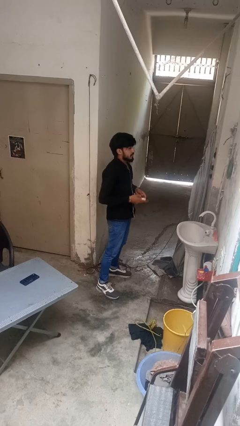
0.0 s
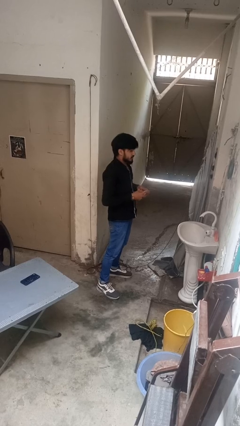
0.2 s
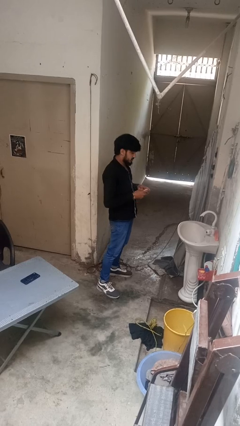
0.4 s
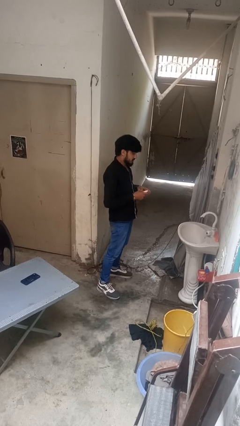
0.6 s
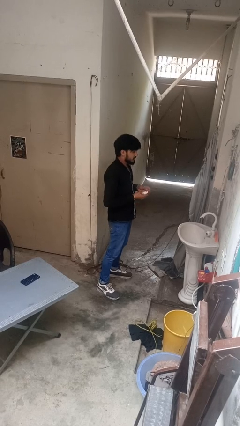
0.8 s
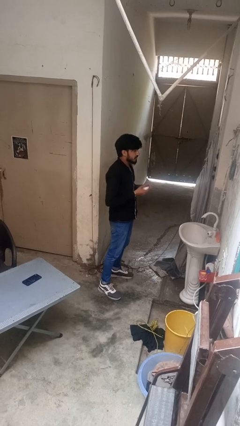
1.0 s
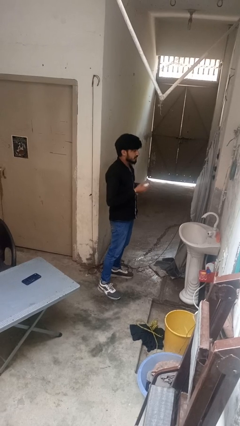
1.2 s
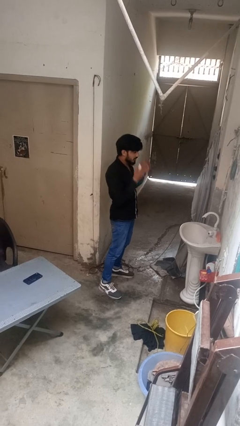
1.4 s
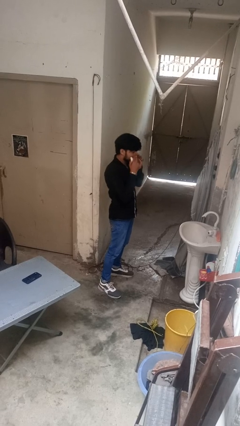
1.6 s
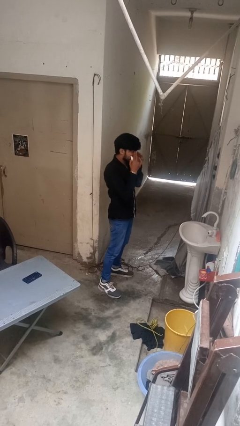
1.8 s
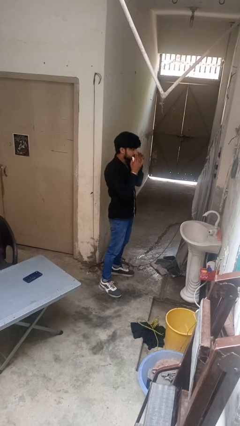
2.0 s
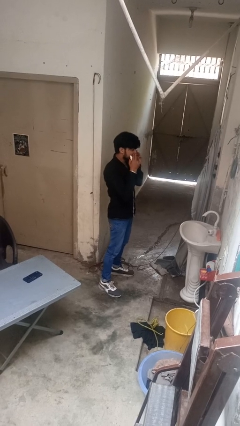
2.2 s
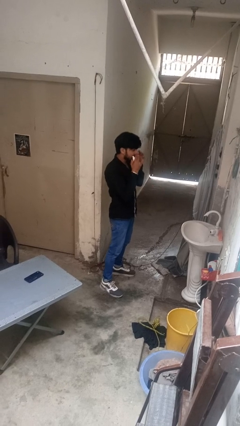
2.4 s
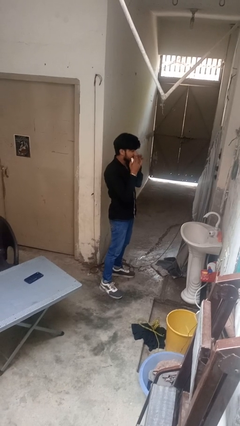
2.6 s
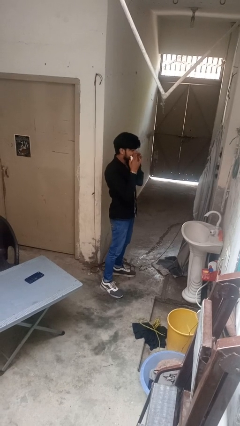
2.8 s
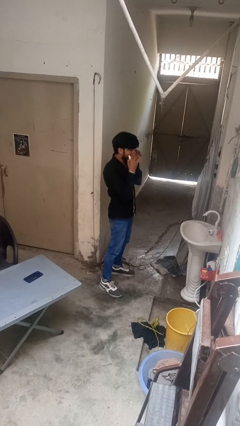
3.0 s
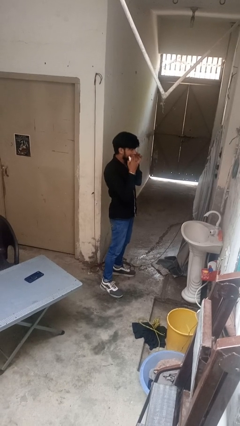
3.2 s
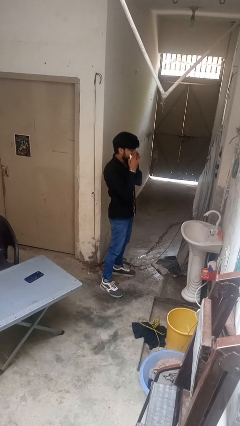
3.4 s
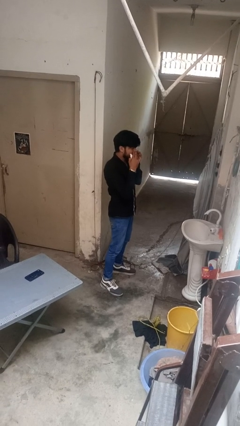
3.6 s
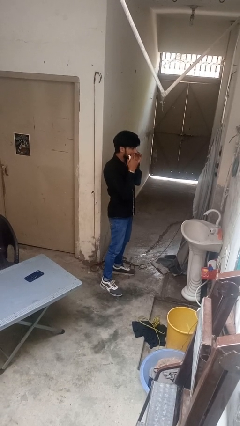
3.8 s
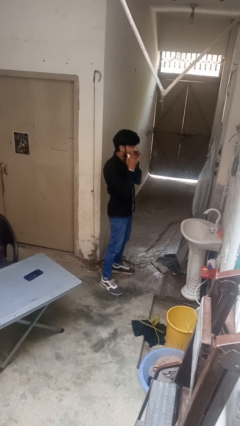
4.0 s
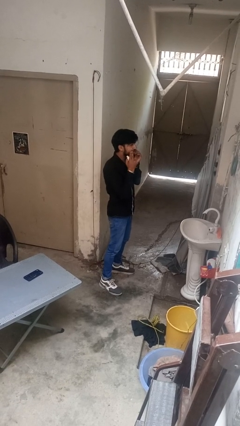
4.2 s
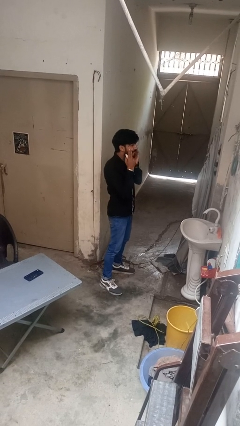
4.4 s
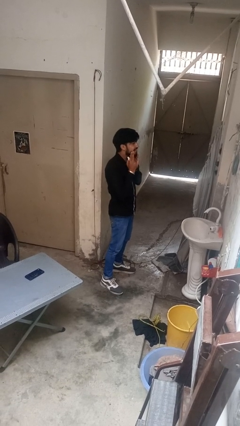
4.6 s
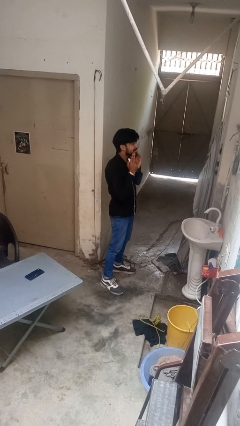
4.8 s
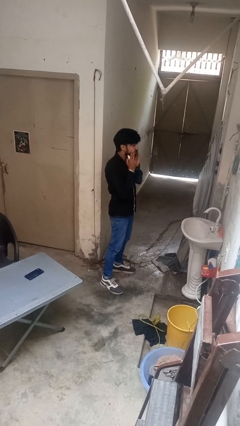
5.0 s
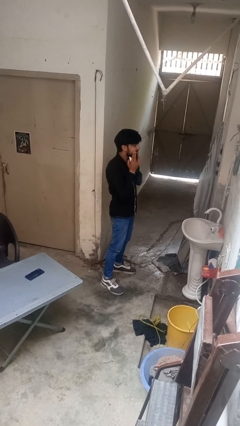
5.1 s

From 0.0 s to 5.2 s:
person applies foundation makeup

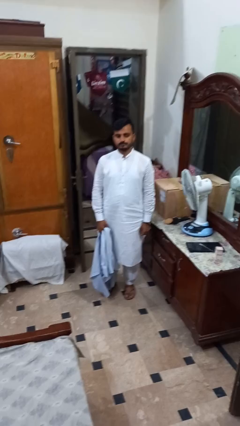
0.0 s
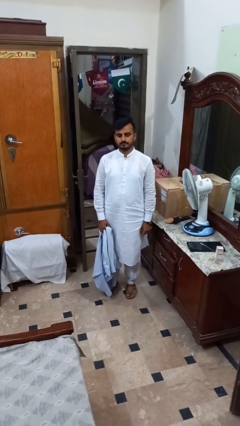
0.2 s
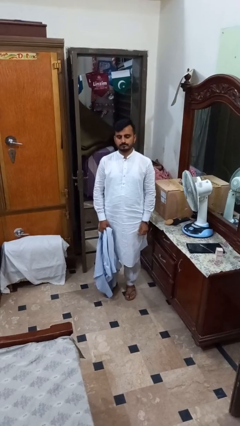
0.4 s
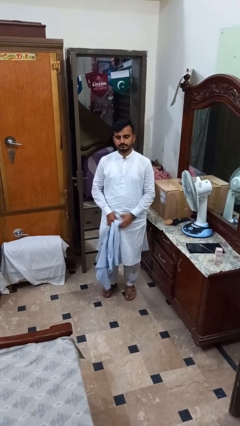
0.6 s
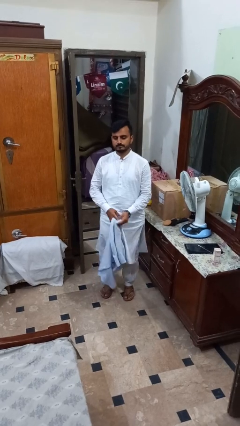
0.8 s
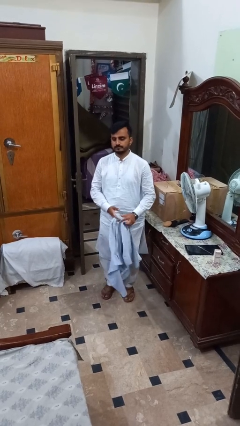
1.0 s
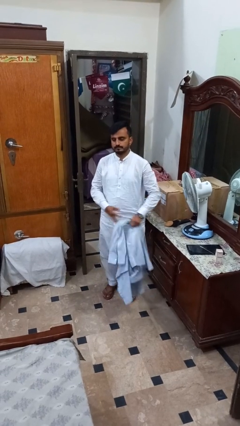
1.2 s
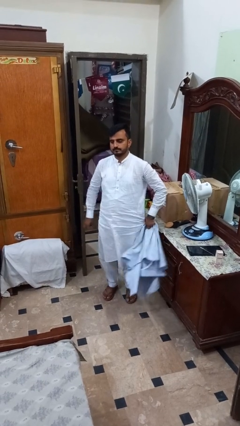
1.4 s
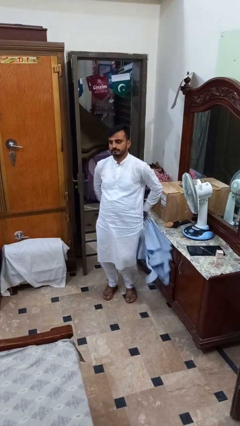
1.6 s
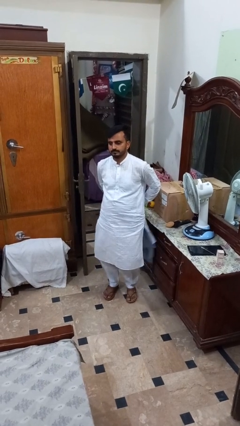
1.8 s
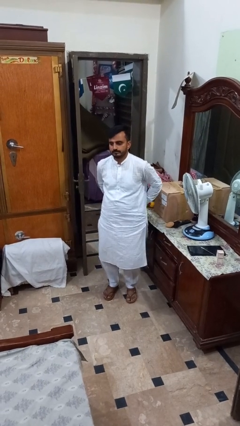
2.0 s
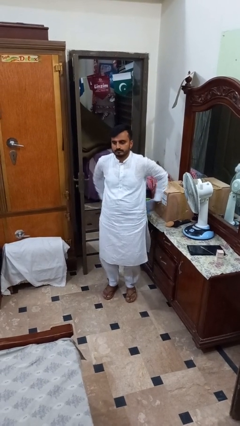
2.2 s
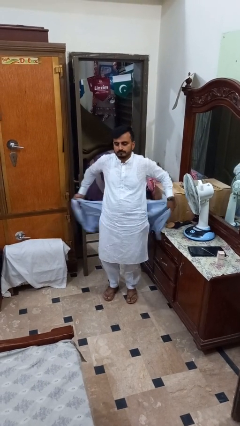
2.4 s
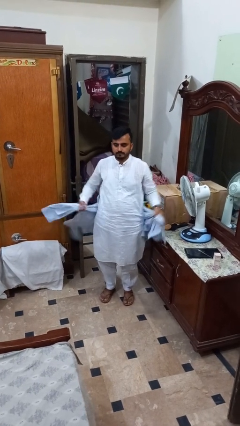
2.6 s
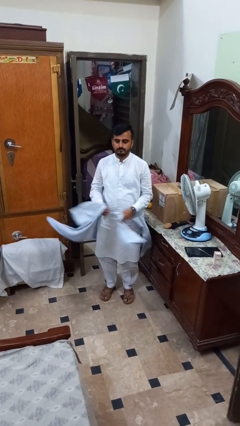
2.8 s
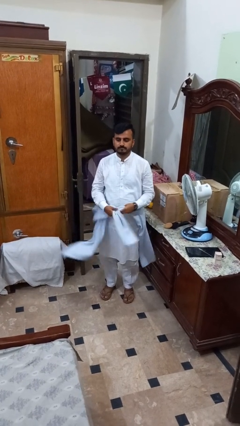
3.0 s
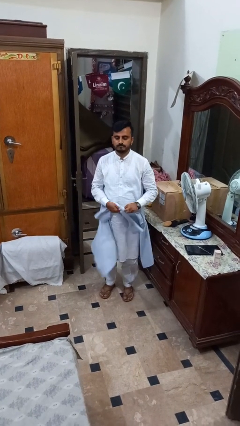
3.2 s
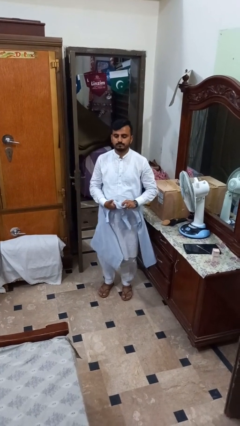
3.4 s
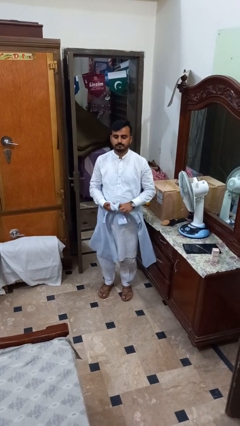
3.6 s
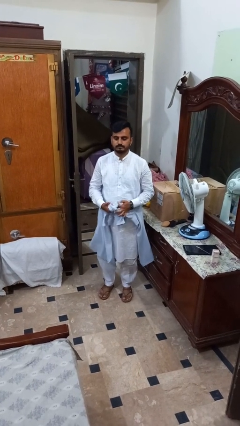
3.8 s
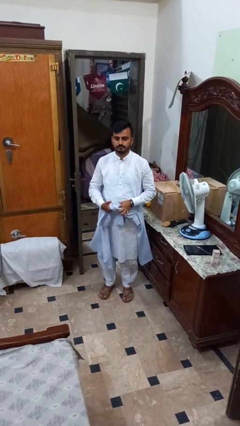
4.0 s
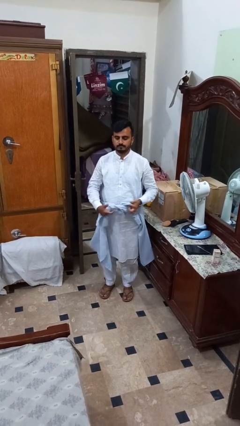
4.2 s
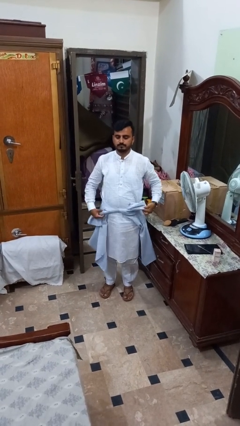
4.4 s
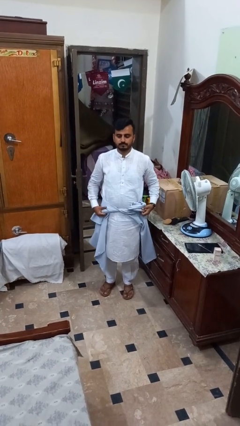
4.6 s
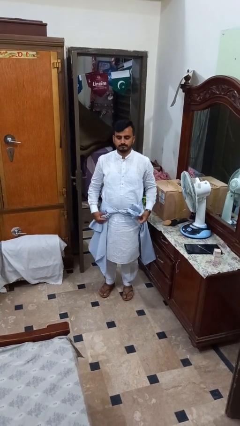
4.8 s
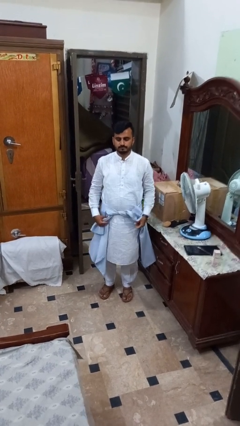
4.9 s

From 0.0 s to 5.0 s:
person ties jacket around waist

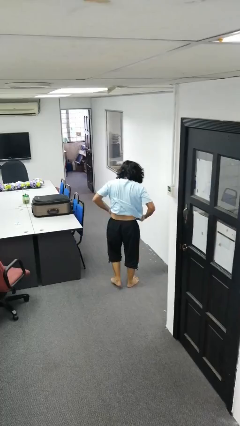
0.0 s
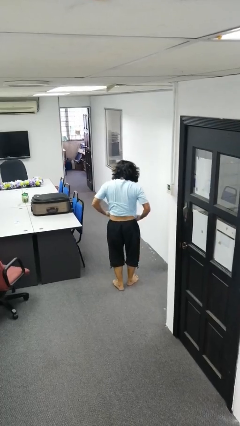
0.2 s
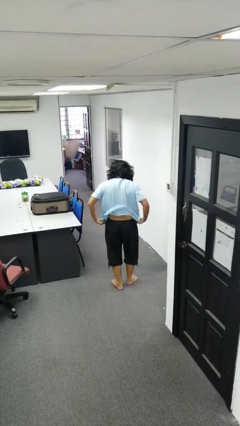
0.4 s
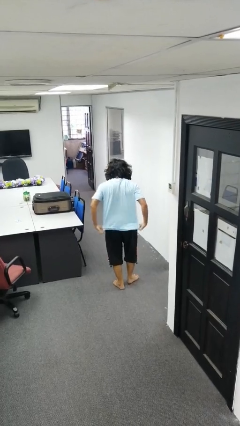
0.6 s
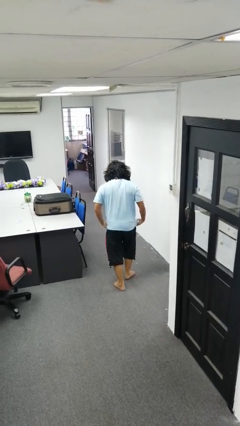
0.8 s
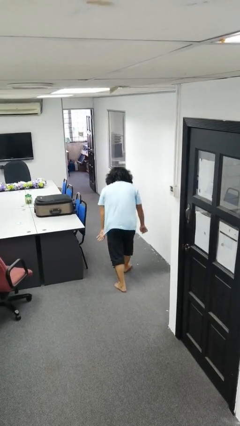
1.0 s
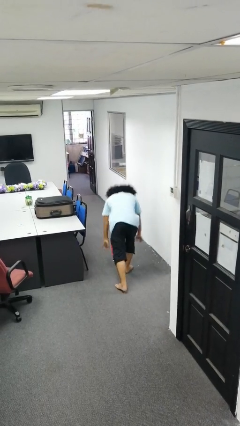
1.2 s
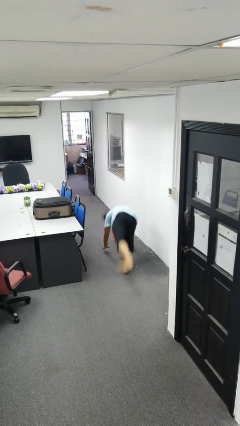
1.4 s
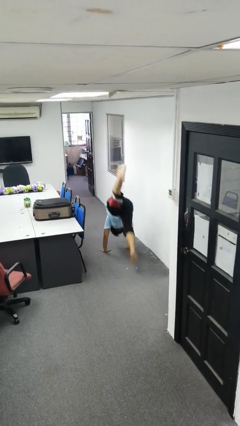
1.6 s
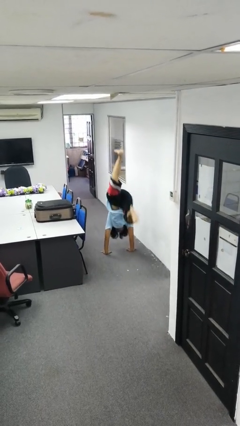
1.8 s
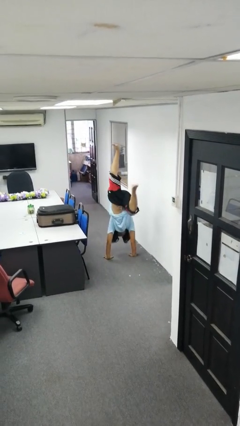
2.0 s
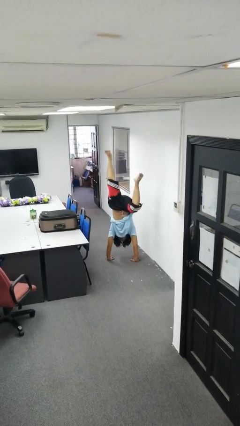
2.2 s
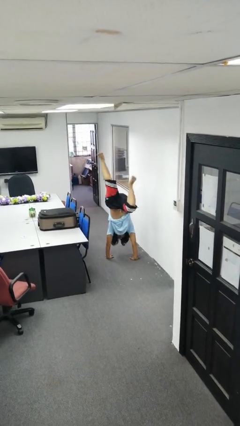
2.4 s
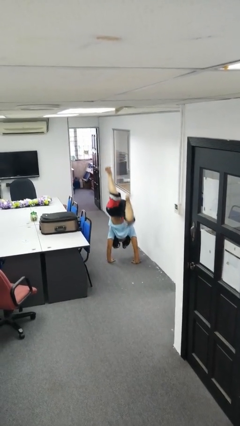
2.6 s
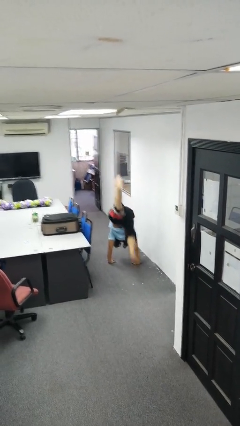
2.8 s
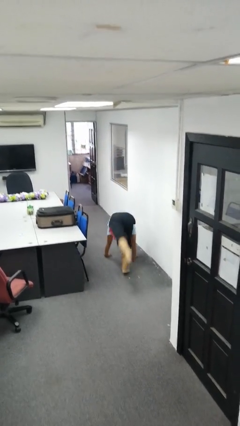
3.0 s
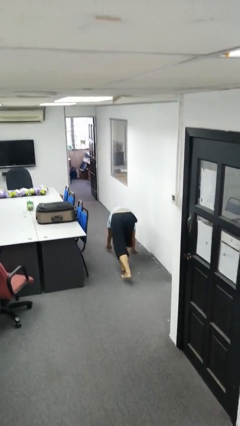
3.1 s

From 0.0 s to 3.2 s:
person handstand

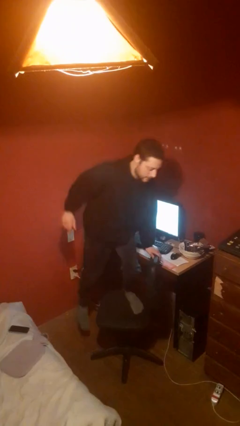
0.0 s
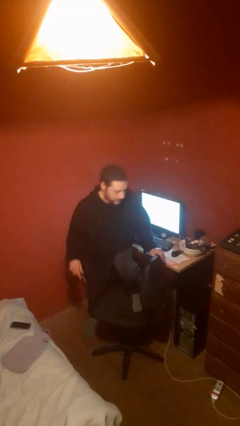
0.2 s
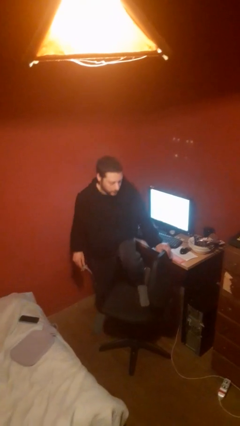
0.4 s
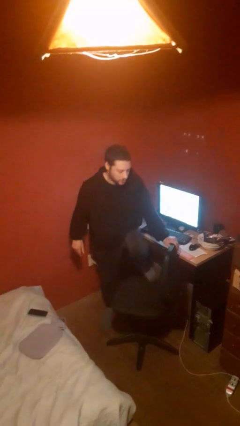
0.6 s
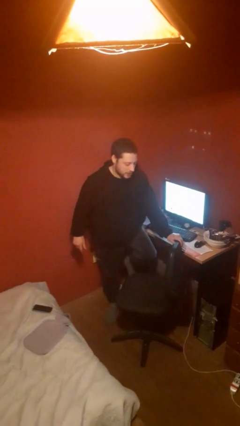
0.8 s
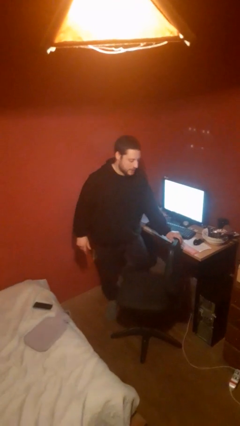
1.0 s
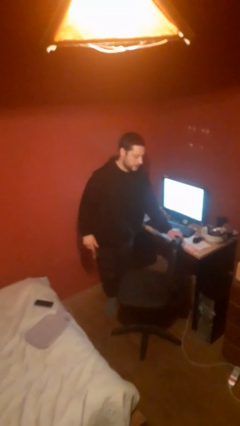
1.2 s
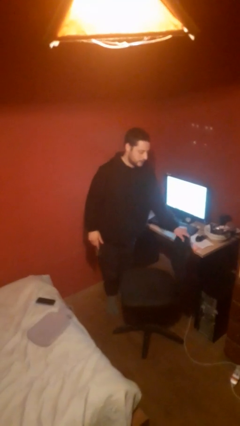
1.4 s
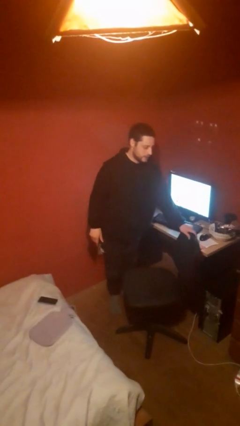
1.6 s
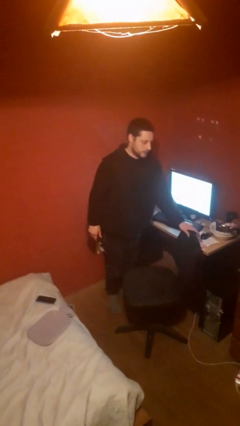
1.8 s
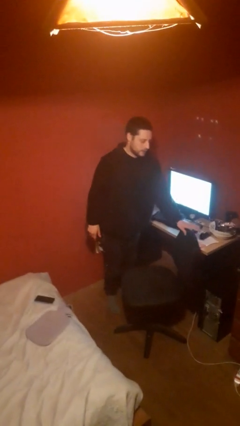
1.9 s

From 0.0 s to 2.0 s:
person climbs off chair

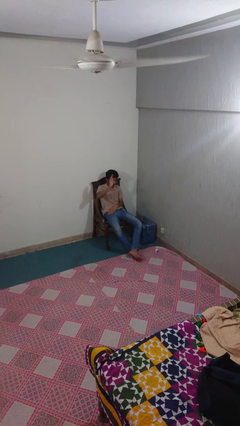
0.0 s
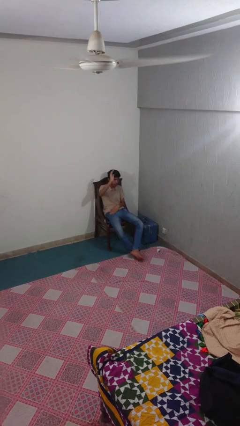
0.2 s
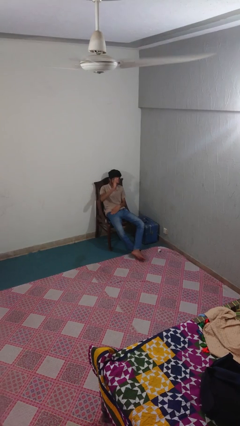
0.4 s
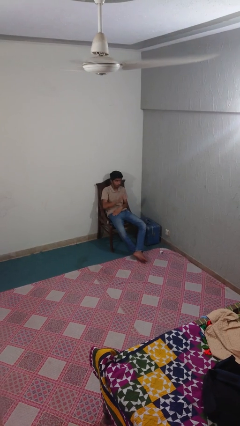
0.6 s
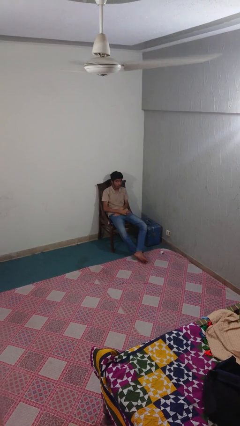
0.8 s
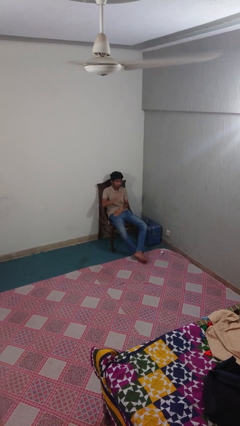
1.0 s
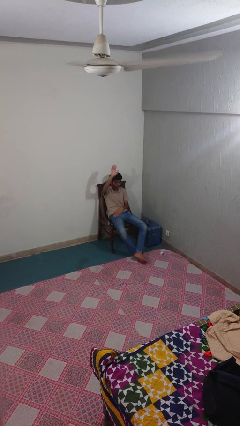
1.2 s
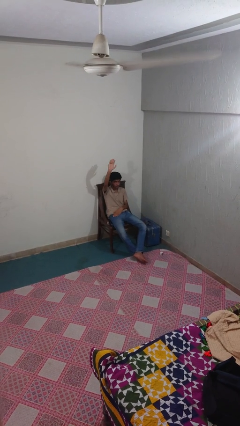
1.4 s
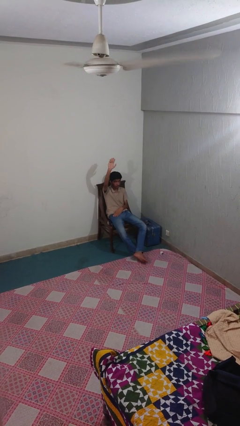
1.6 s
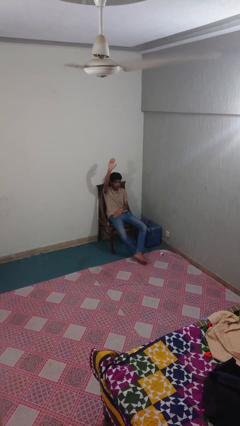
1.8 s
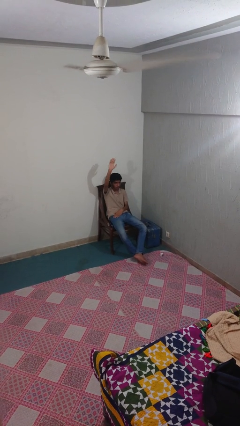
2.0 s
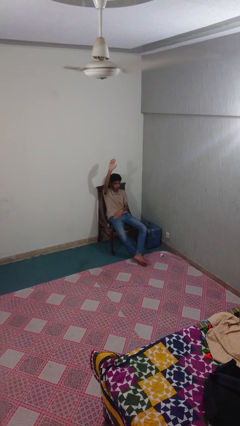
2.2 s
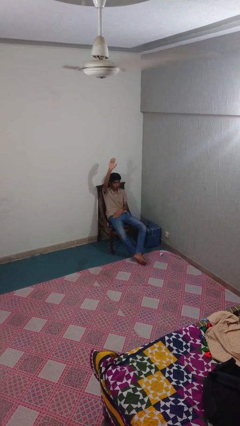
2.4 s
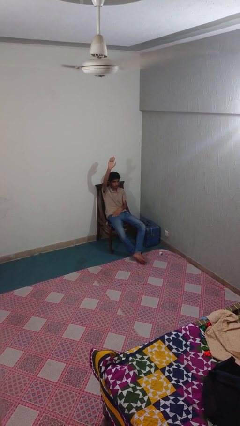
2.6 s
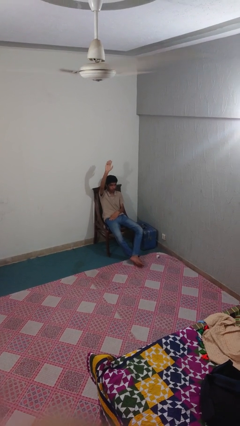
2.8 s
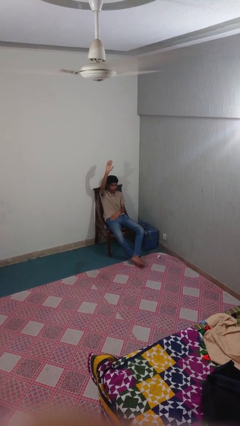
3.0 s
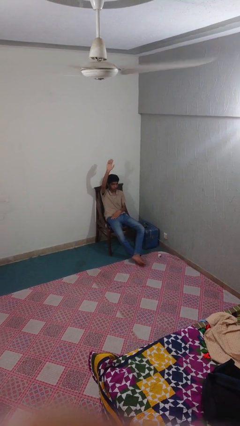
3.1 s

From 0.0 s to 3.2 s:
person gestures raise hand
